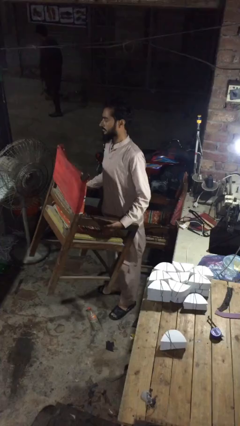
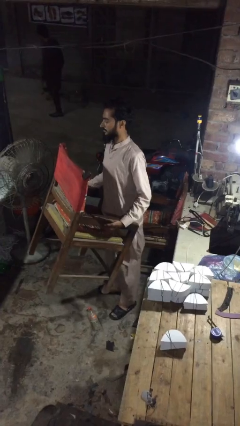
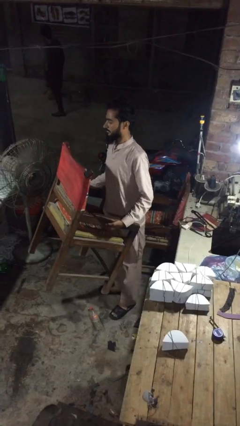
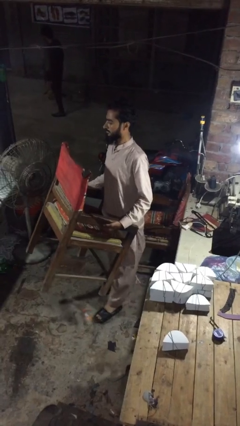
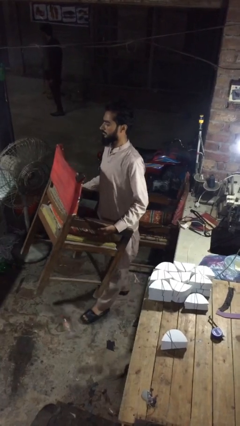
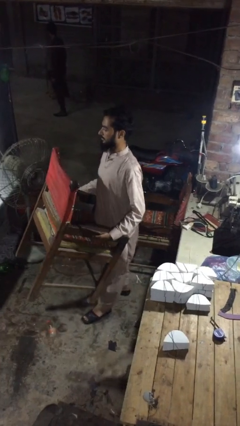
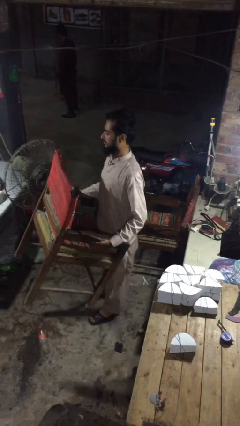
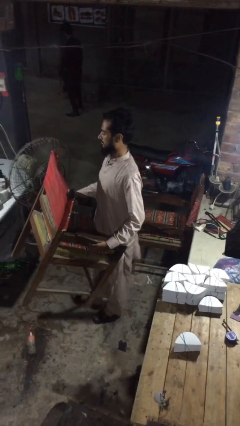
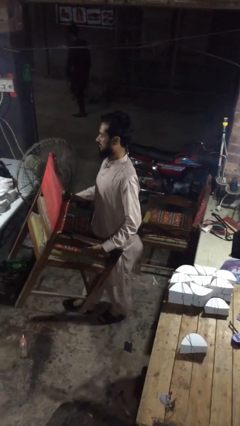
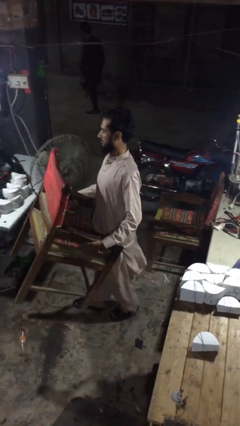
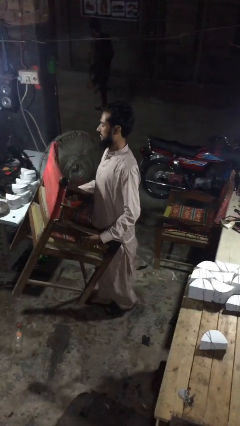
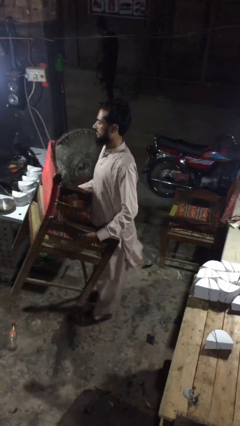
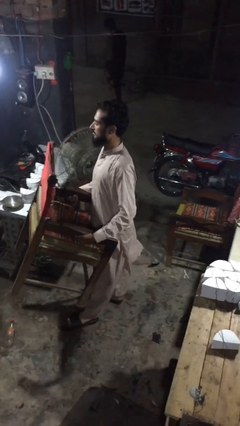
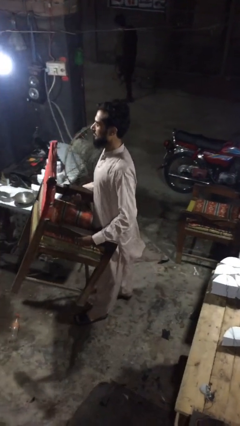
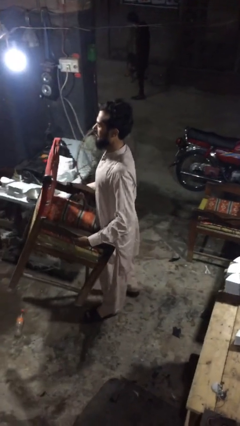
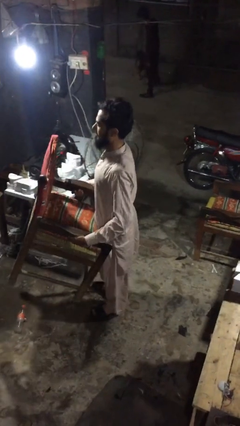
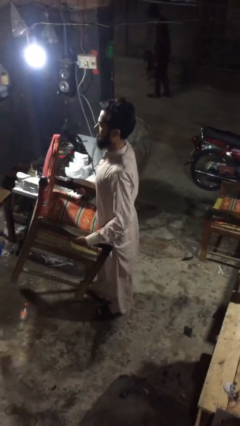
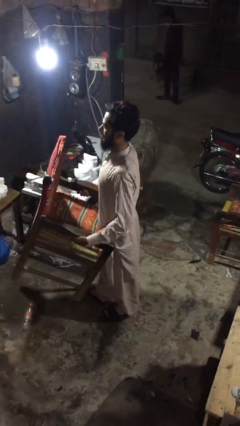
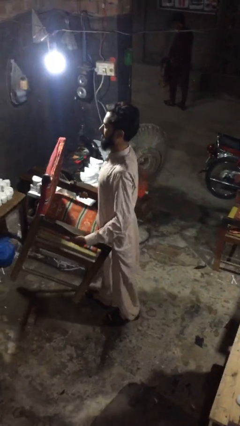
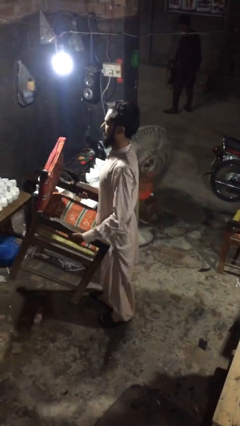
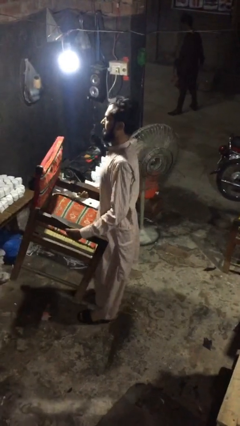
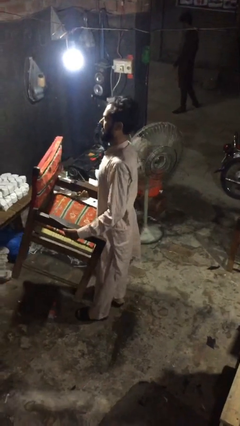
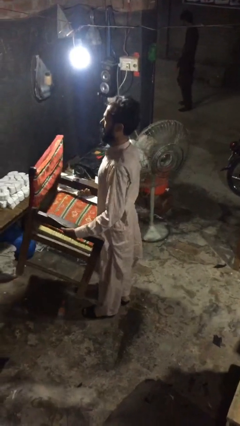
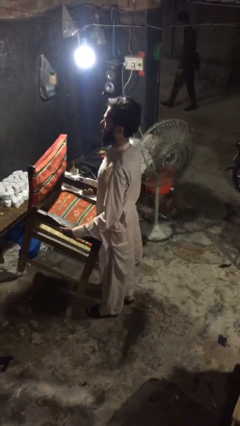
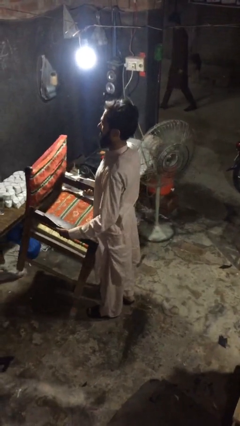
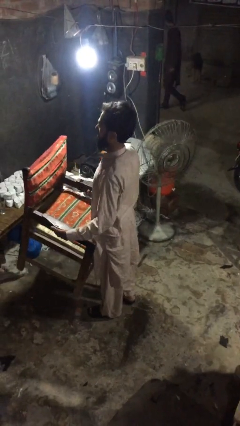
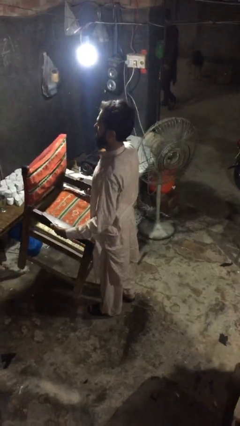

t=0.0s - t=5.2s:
person carries heavy object

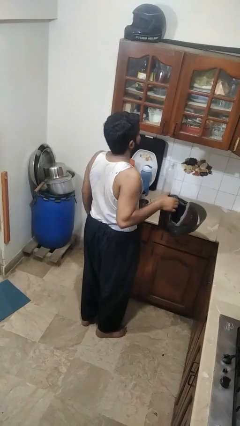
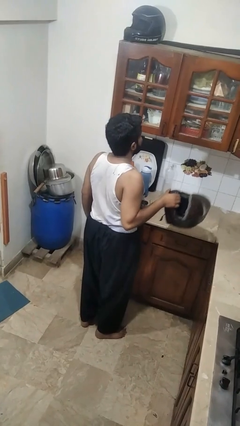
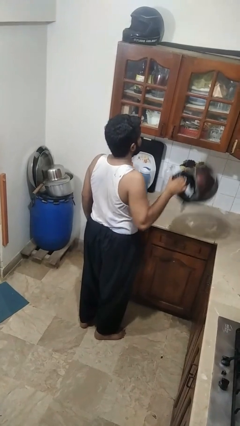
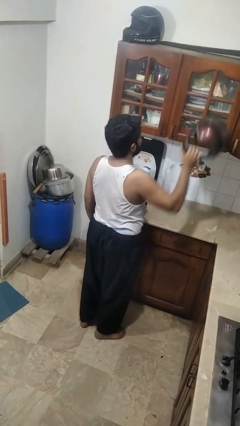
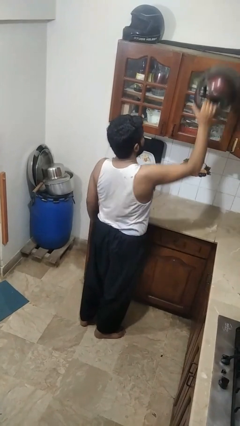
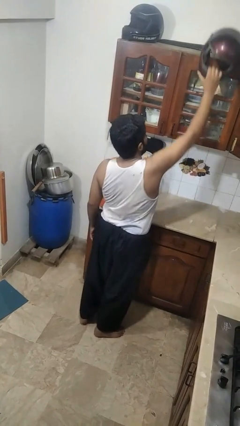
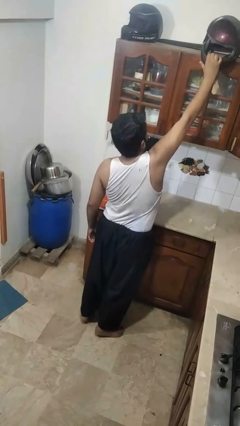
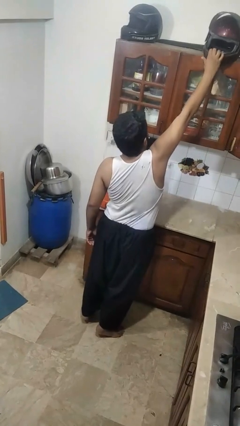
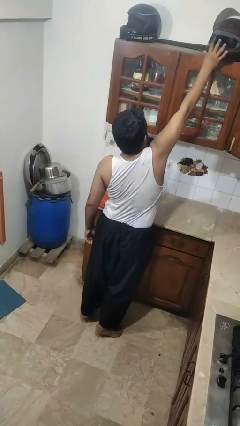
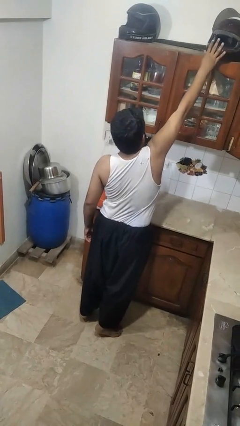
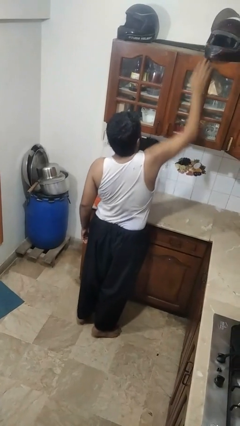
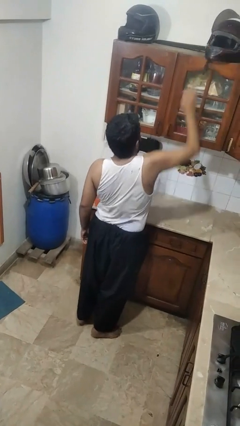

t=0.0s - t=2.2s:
person puts down object on shelf

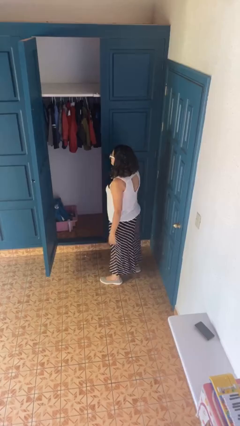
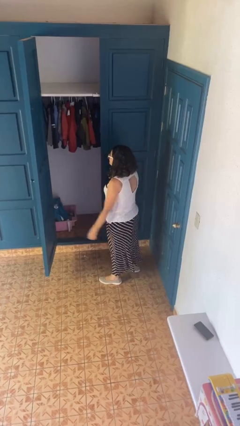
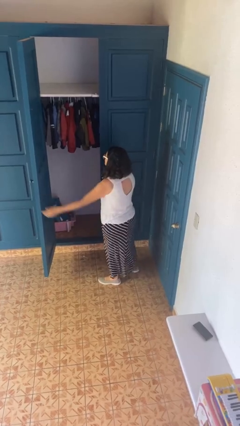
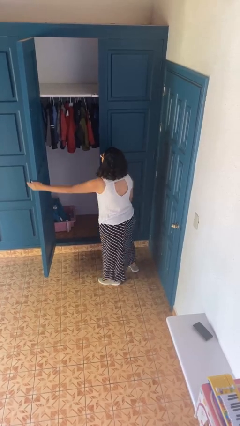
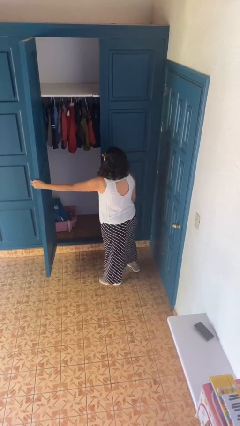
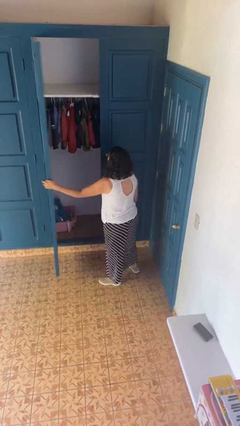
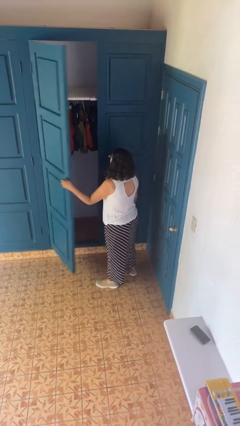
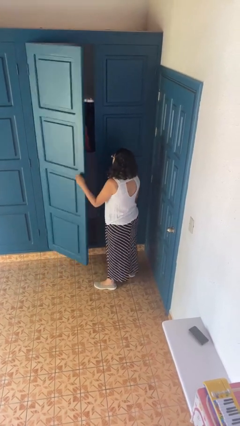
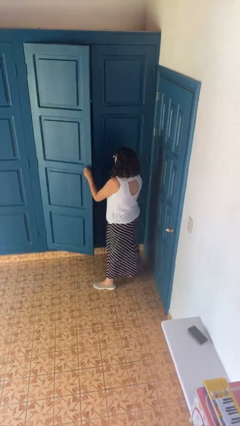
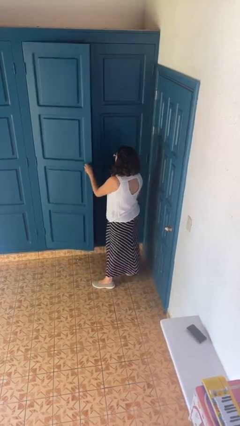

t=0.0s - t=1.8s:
person closes closet door

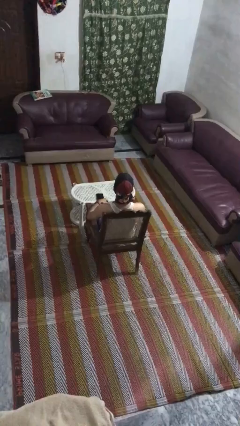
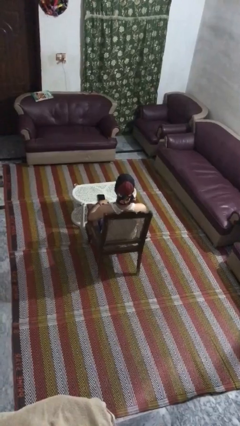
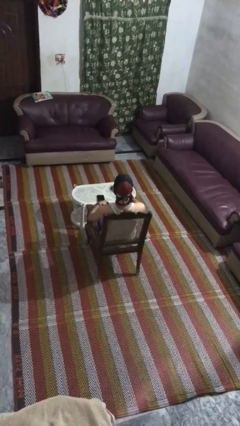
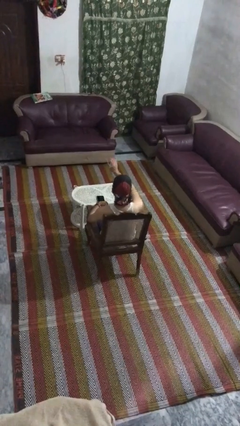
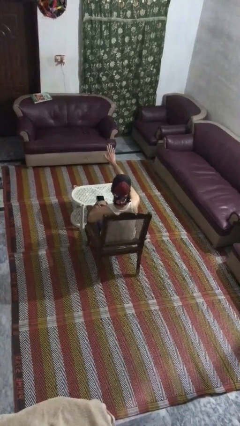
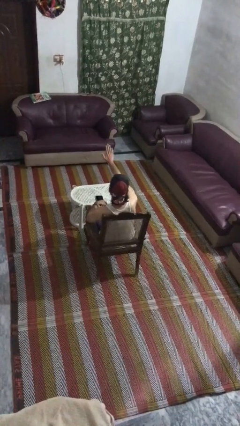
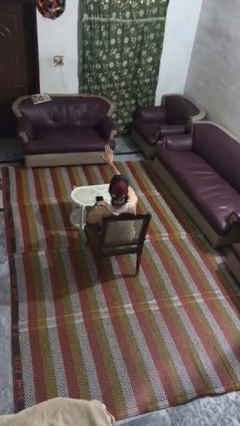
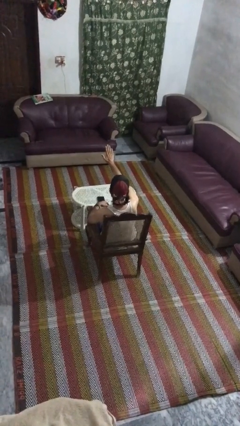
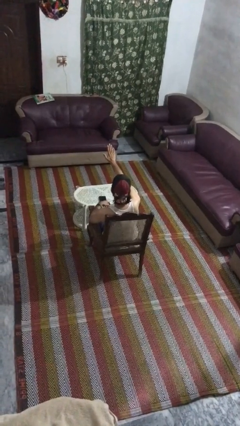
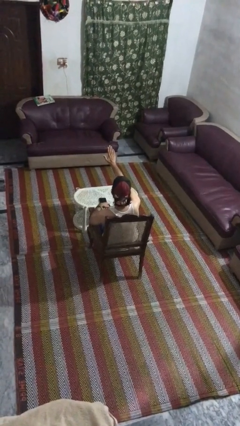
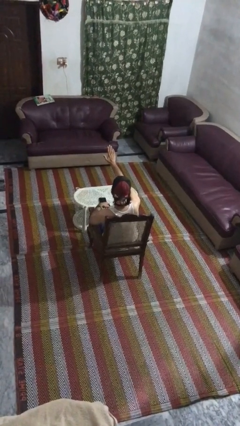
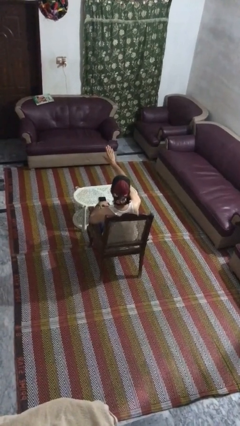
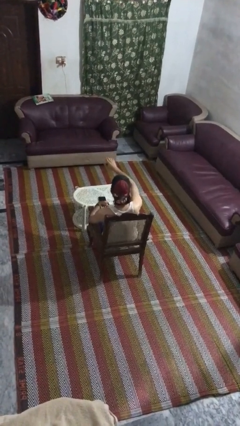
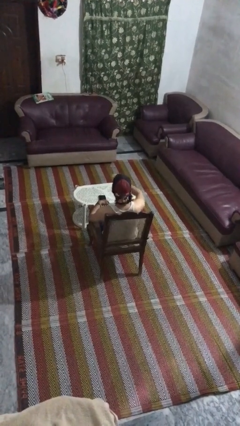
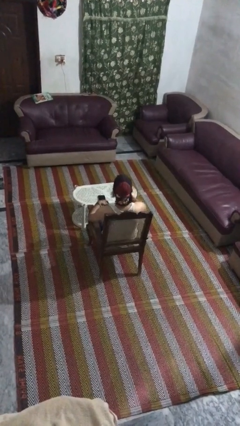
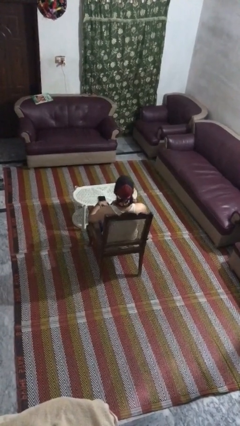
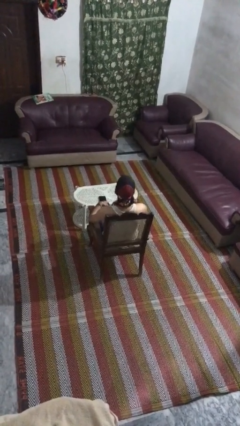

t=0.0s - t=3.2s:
person gestures stop

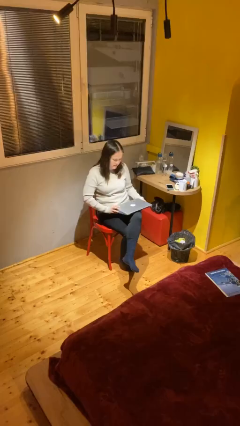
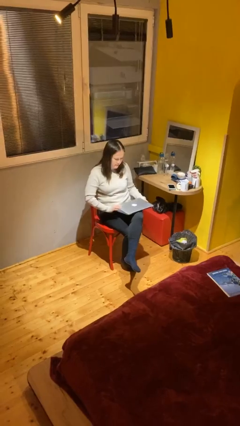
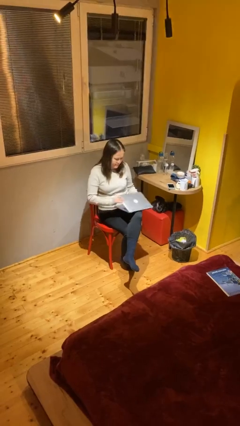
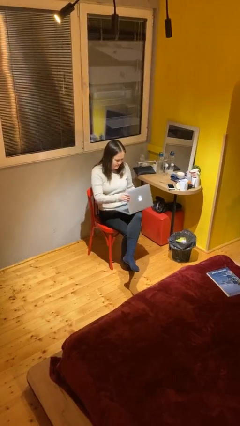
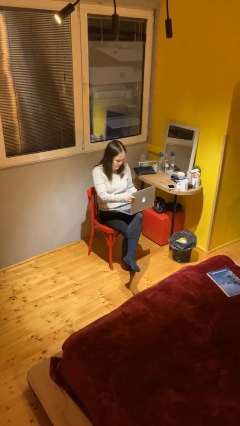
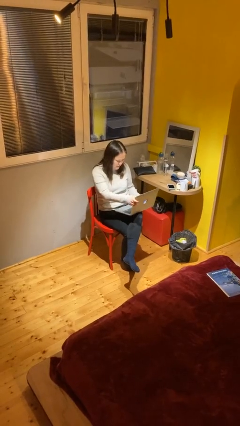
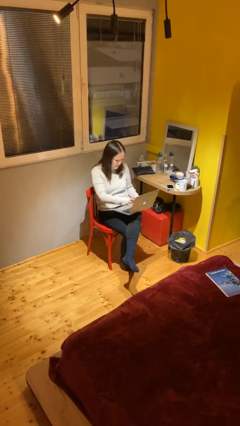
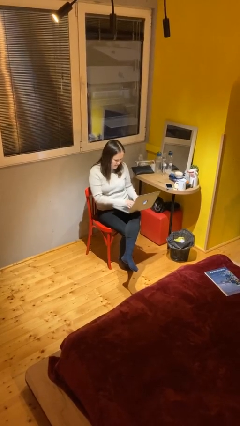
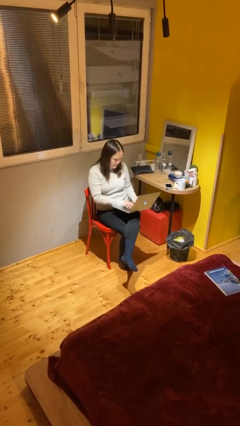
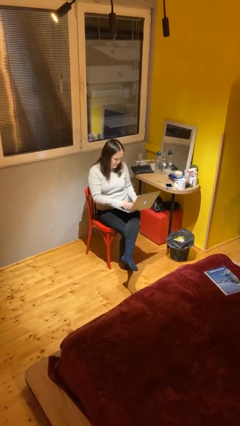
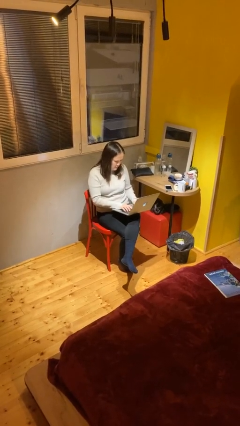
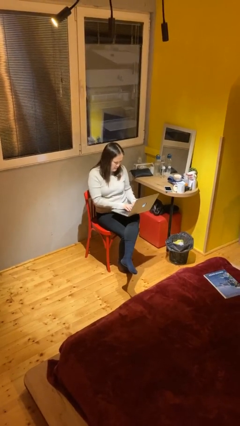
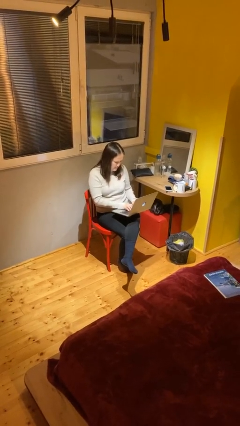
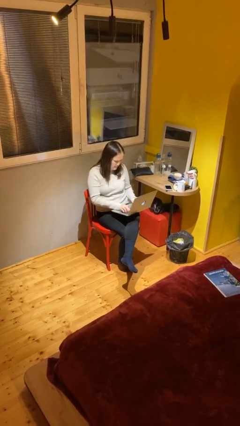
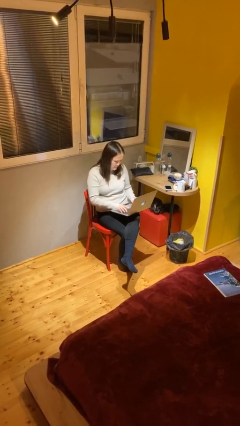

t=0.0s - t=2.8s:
person interacts with laptop

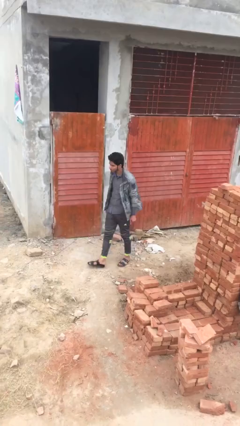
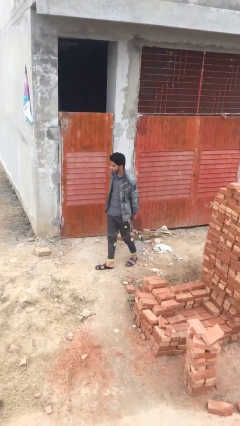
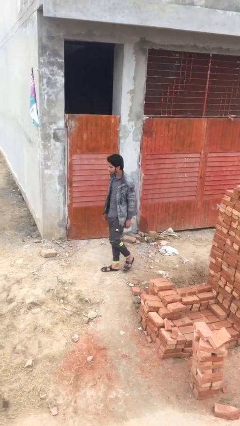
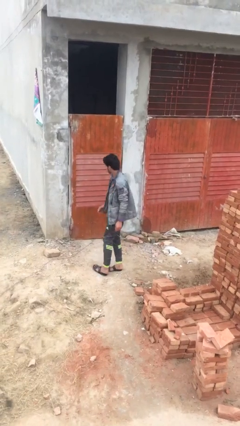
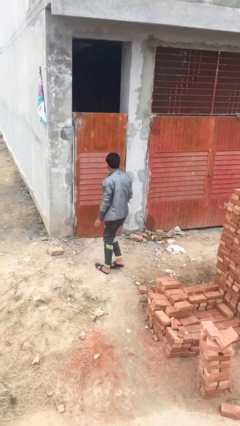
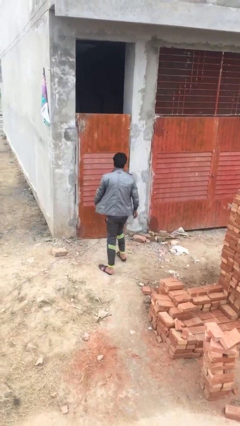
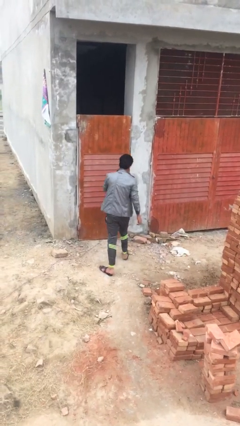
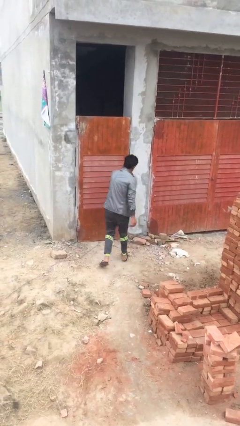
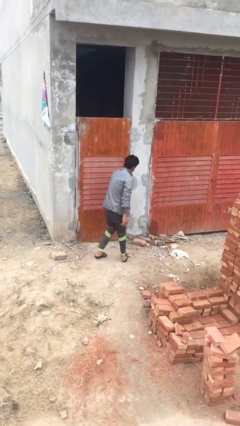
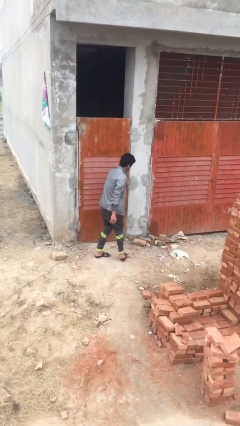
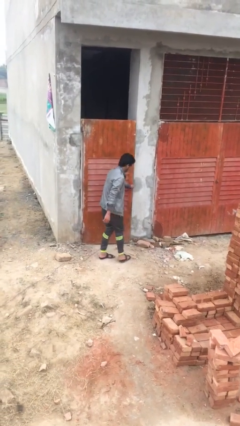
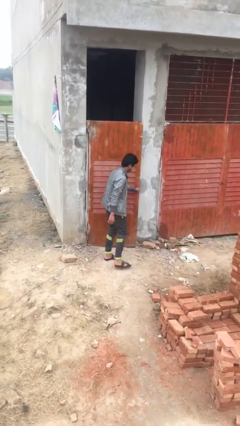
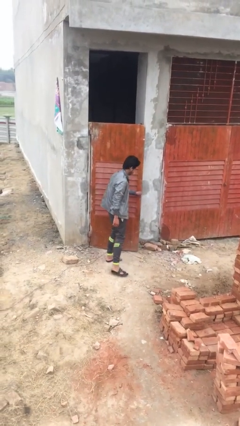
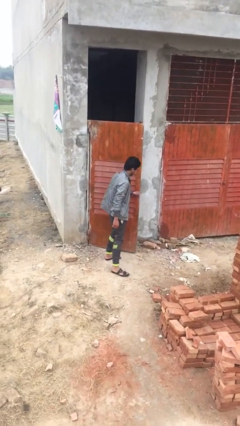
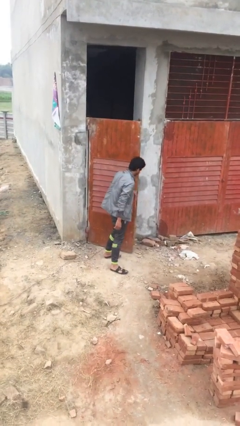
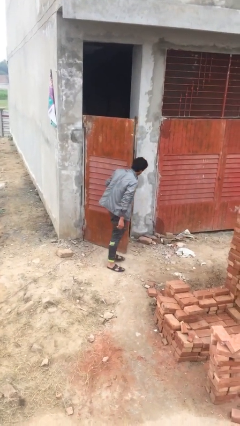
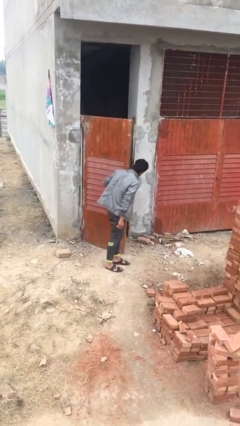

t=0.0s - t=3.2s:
person opens facility door
